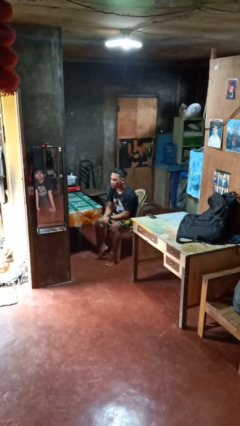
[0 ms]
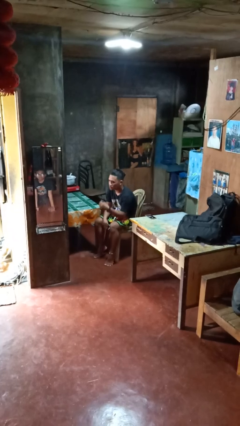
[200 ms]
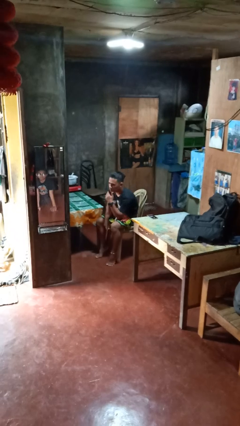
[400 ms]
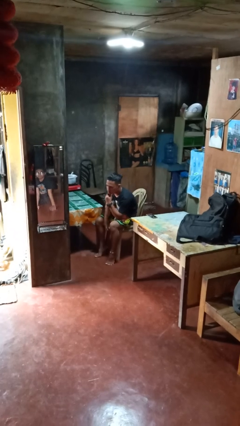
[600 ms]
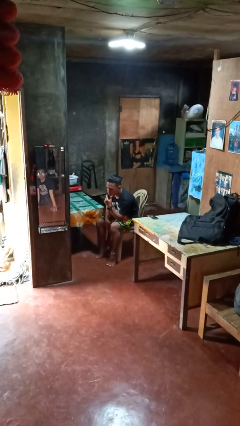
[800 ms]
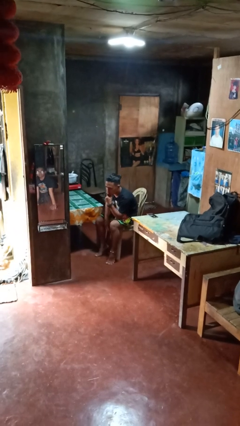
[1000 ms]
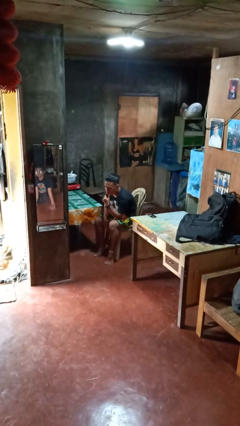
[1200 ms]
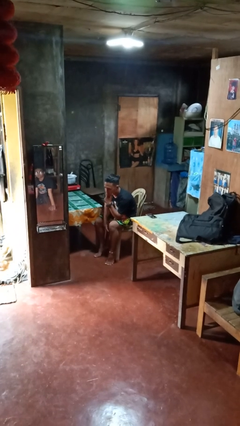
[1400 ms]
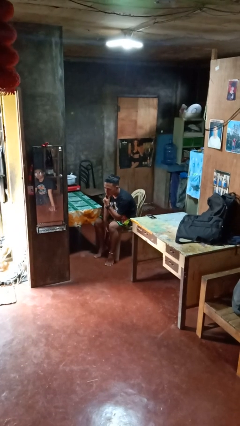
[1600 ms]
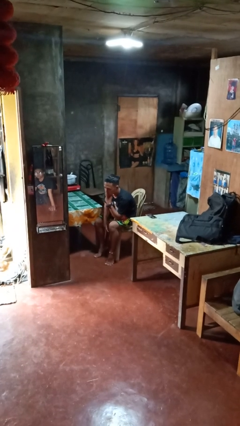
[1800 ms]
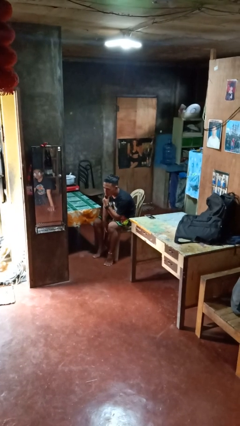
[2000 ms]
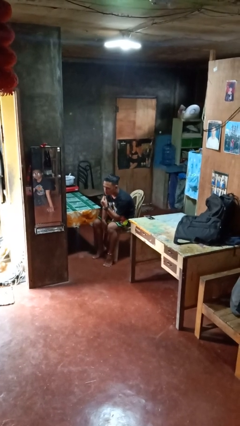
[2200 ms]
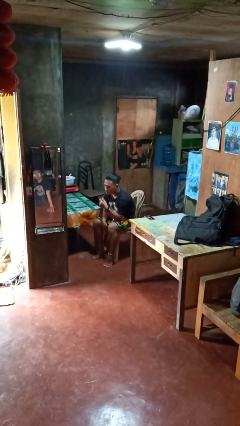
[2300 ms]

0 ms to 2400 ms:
person strokes chin

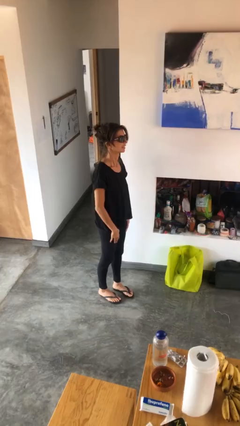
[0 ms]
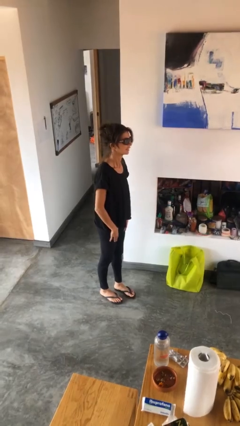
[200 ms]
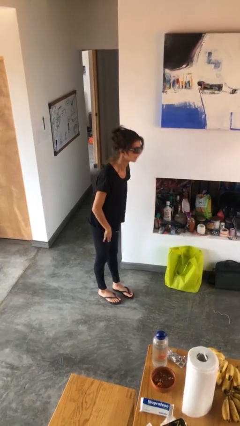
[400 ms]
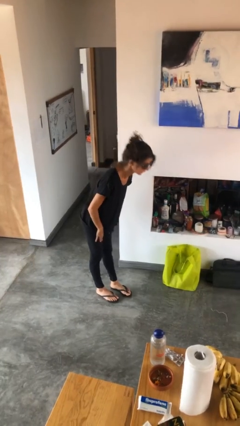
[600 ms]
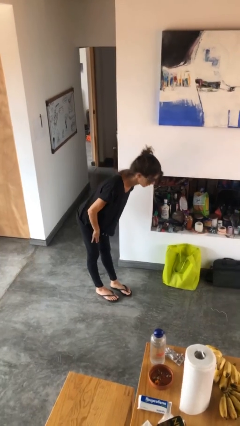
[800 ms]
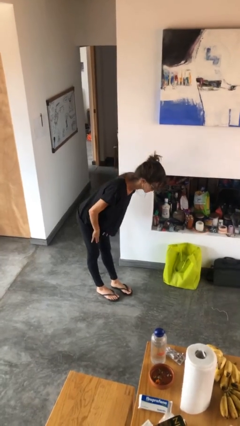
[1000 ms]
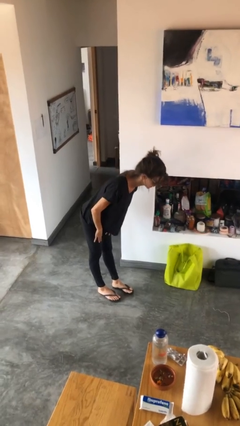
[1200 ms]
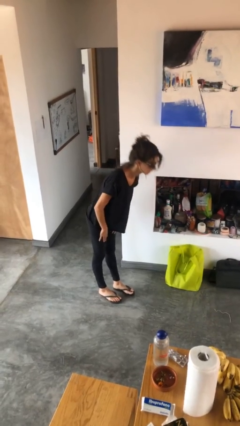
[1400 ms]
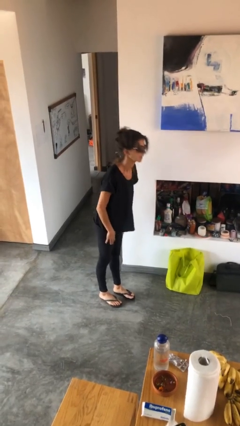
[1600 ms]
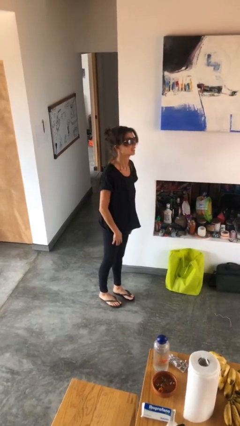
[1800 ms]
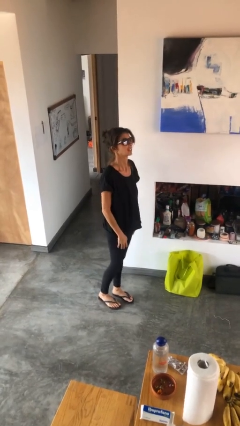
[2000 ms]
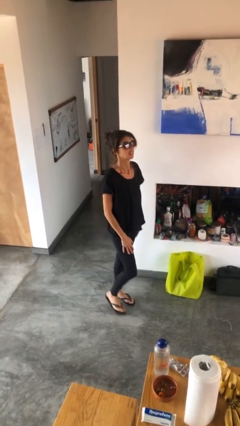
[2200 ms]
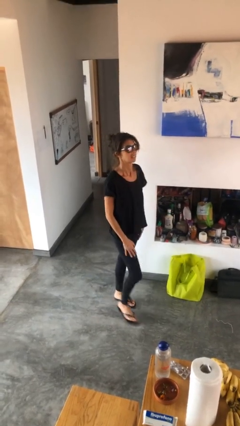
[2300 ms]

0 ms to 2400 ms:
person bows

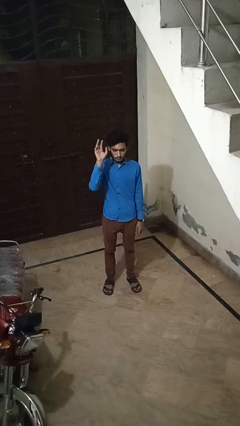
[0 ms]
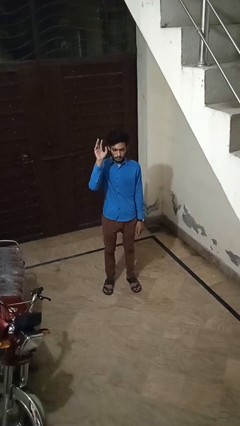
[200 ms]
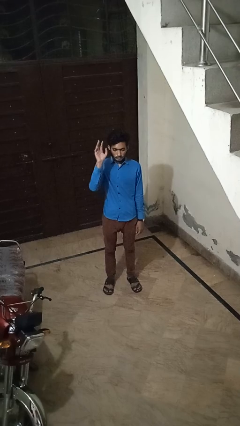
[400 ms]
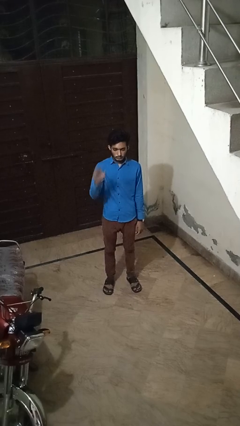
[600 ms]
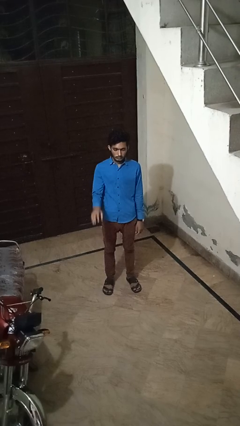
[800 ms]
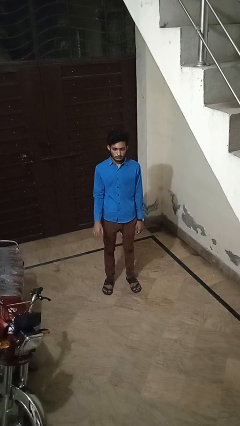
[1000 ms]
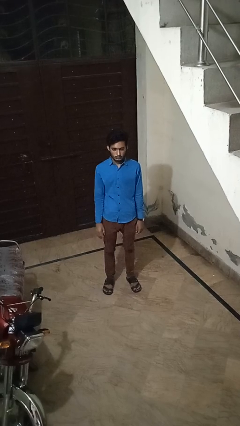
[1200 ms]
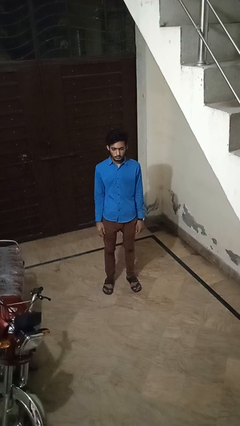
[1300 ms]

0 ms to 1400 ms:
person gestures lower hand

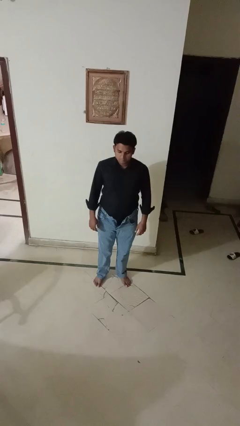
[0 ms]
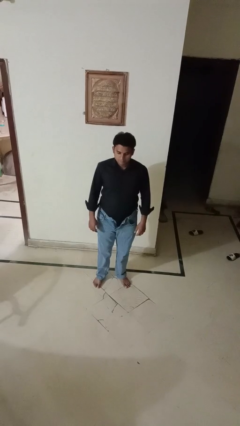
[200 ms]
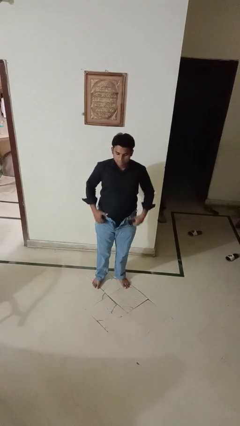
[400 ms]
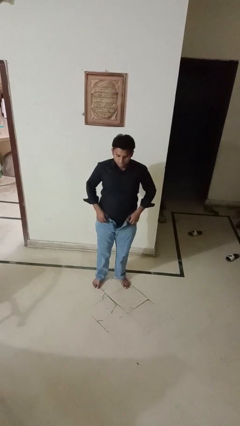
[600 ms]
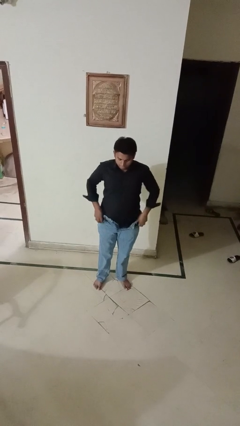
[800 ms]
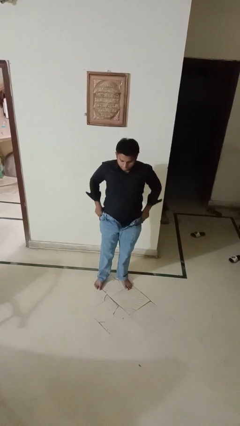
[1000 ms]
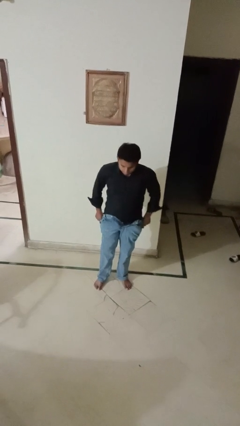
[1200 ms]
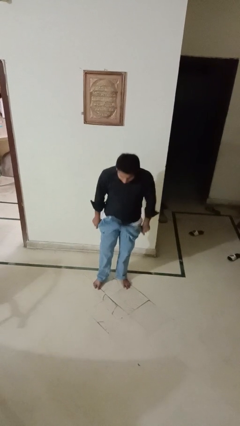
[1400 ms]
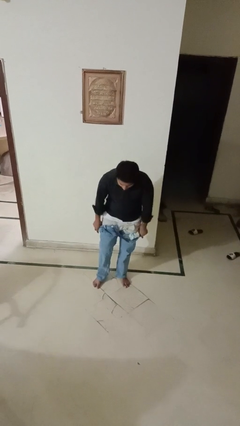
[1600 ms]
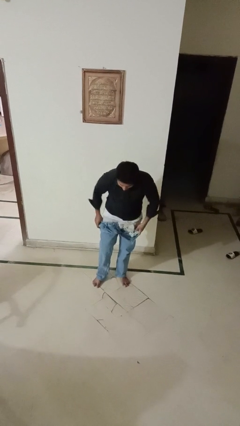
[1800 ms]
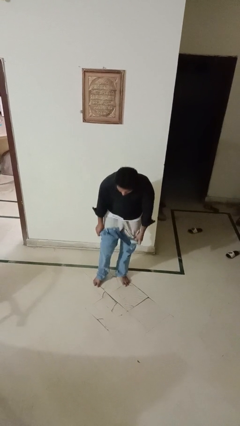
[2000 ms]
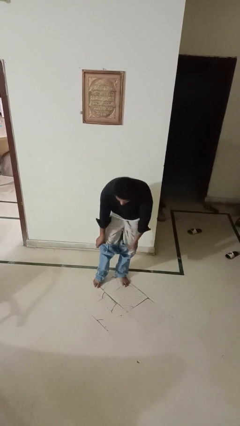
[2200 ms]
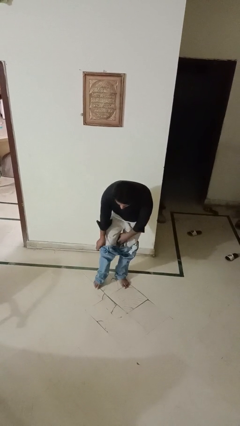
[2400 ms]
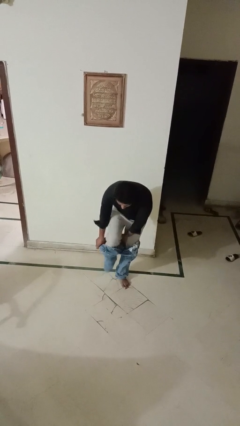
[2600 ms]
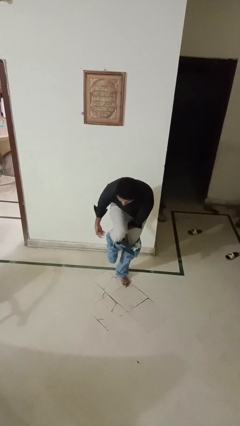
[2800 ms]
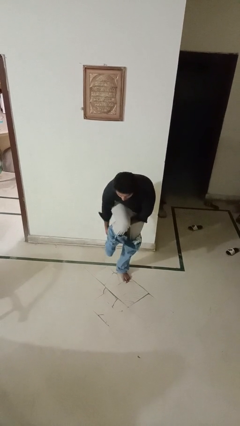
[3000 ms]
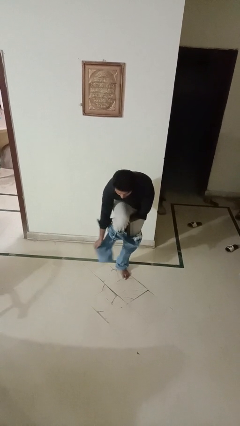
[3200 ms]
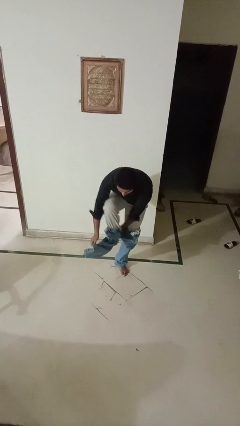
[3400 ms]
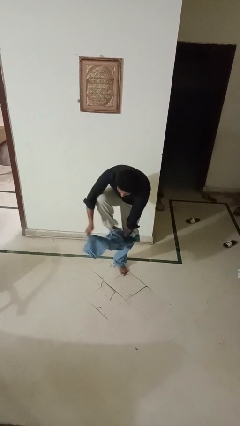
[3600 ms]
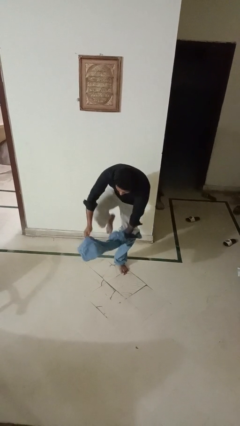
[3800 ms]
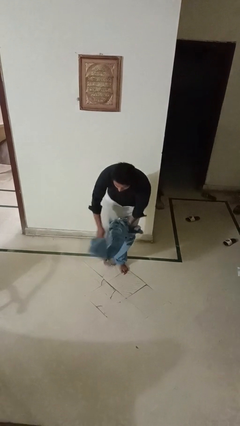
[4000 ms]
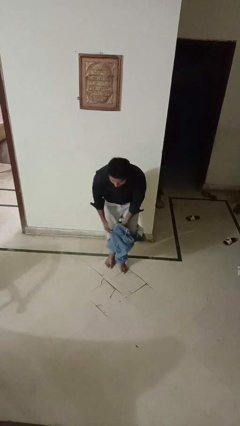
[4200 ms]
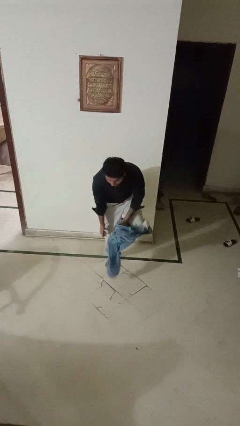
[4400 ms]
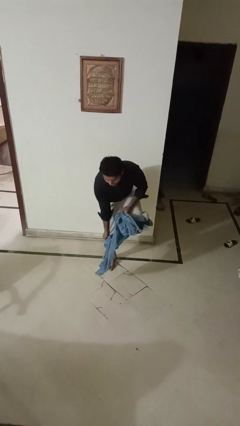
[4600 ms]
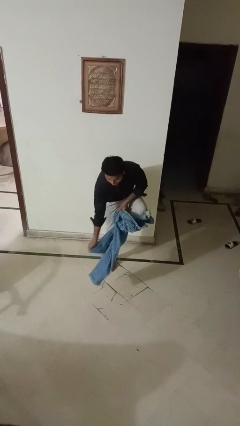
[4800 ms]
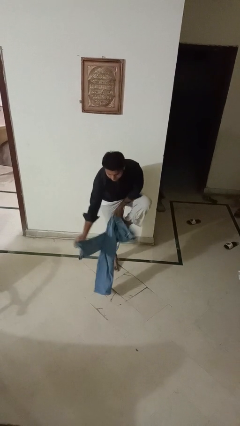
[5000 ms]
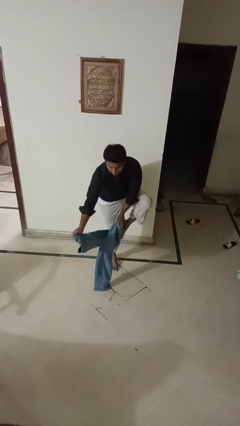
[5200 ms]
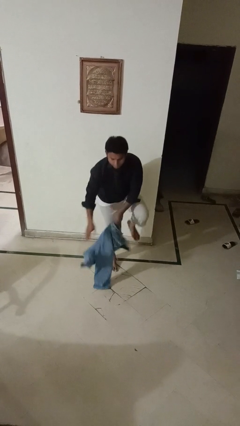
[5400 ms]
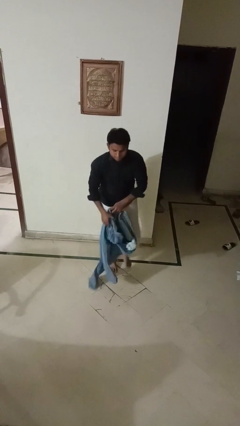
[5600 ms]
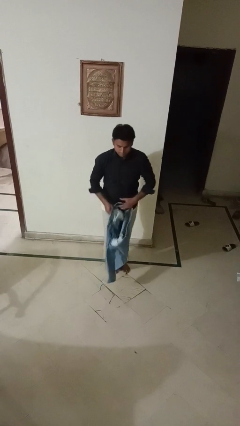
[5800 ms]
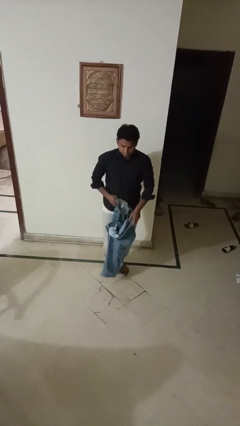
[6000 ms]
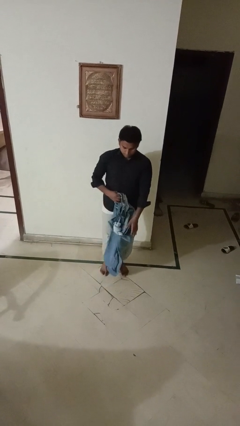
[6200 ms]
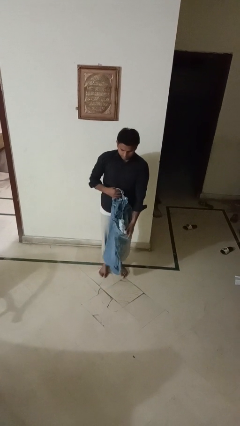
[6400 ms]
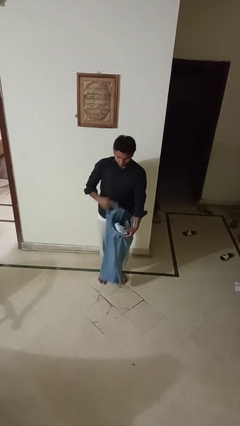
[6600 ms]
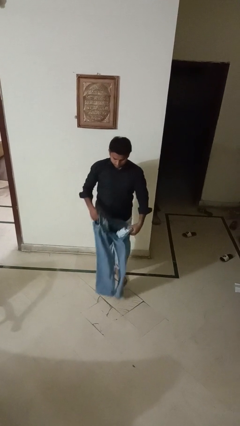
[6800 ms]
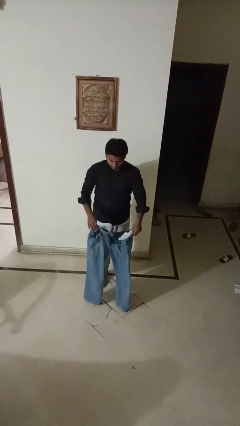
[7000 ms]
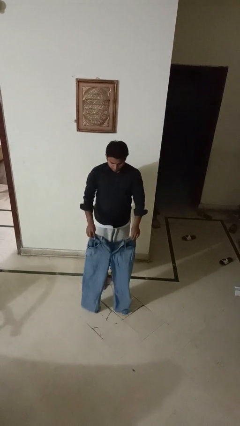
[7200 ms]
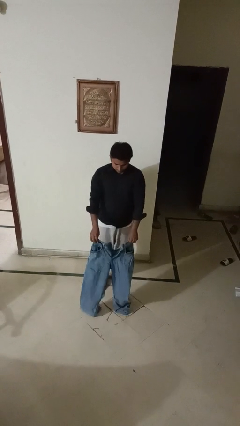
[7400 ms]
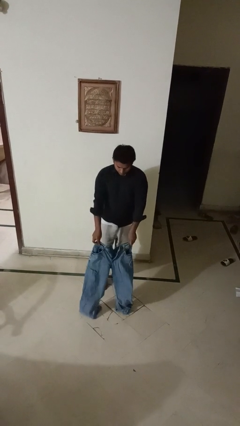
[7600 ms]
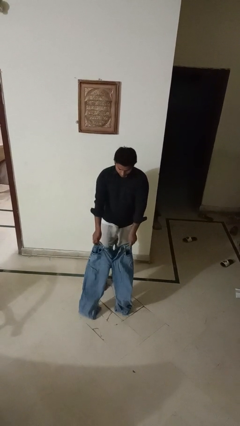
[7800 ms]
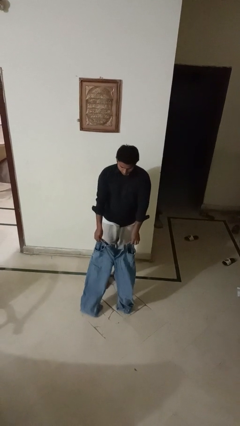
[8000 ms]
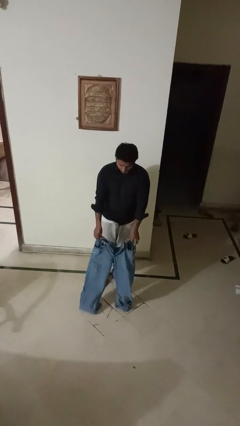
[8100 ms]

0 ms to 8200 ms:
person takes off pants

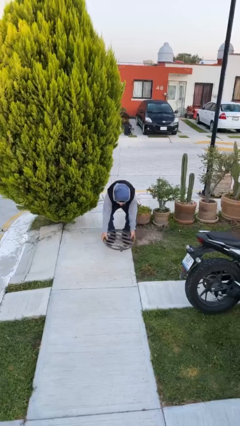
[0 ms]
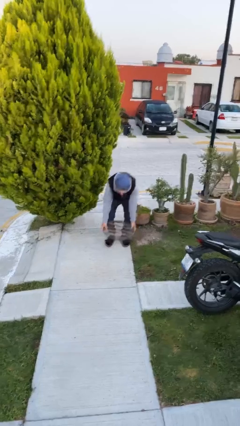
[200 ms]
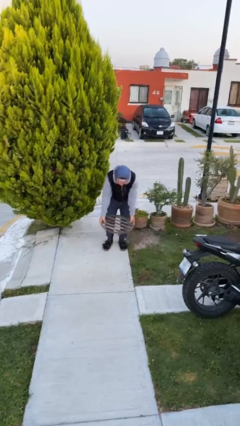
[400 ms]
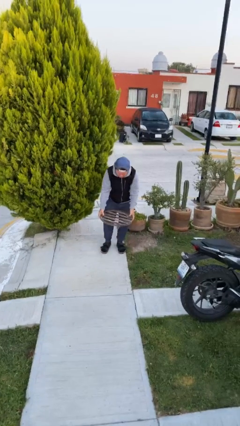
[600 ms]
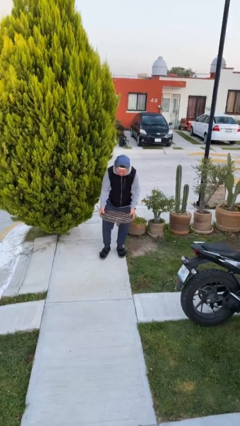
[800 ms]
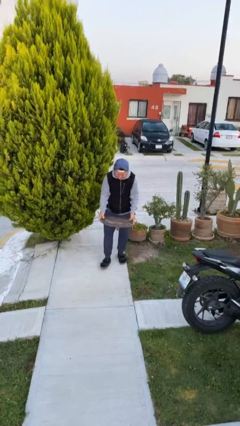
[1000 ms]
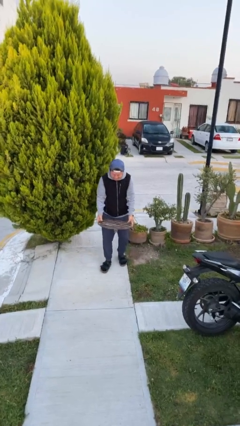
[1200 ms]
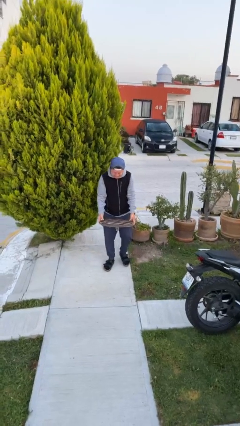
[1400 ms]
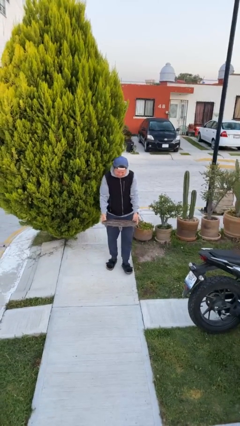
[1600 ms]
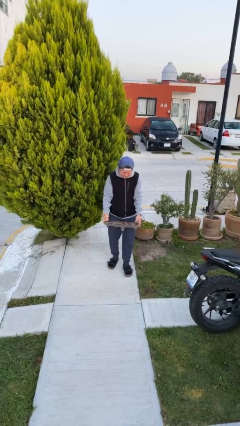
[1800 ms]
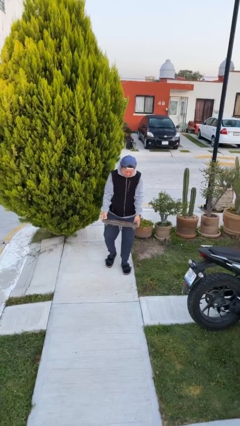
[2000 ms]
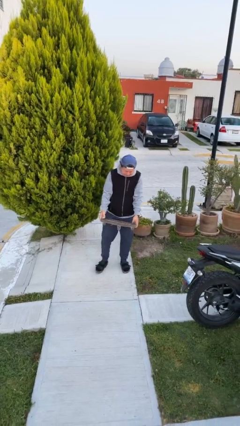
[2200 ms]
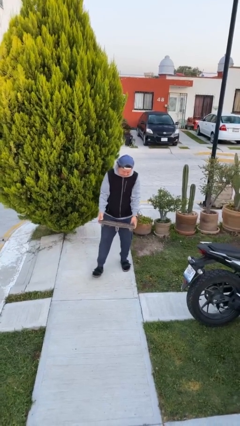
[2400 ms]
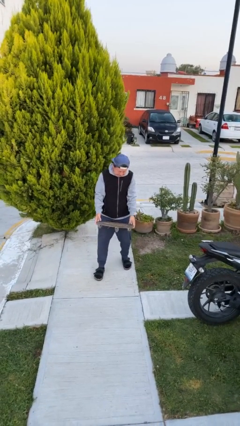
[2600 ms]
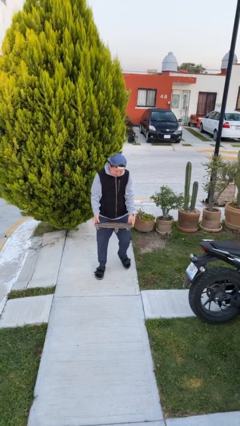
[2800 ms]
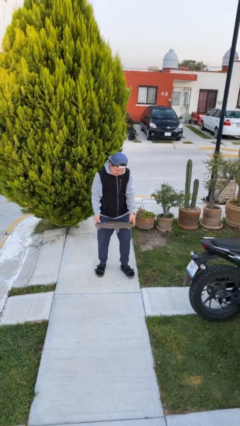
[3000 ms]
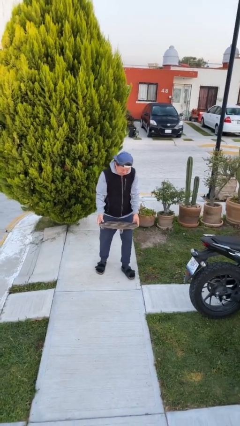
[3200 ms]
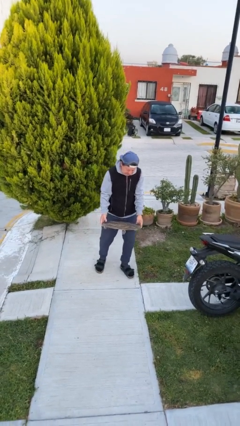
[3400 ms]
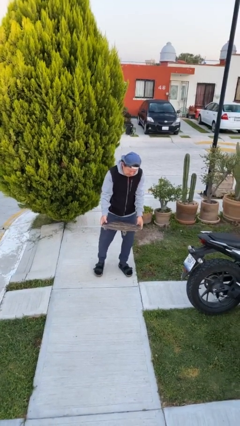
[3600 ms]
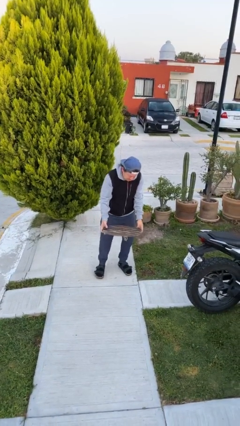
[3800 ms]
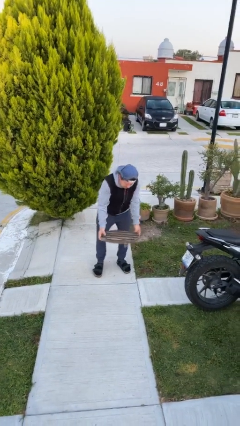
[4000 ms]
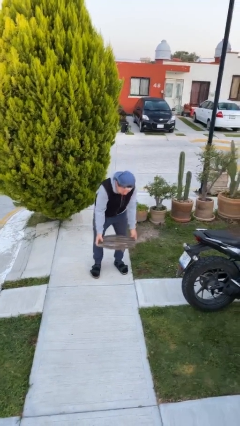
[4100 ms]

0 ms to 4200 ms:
person carries heavy object
